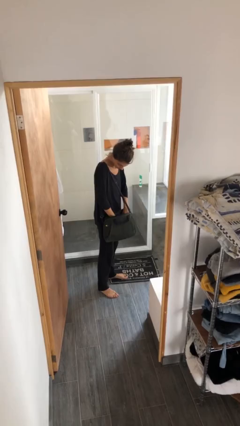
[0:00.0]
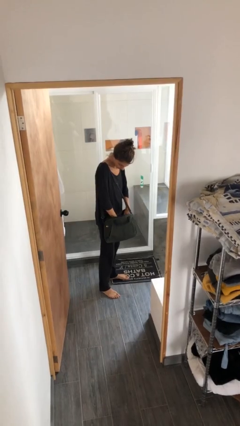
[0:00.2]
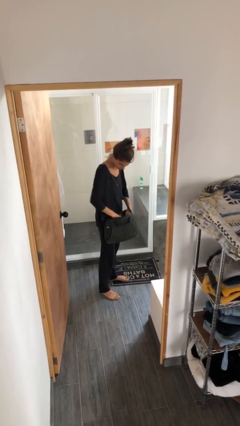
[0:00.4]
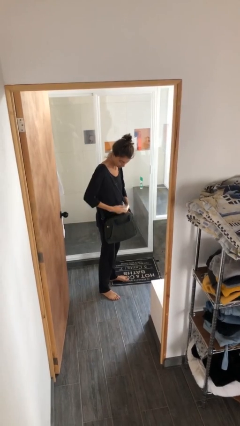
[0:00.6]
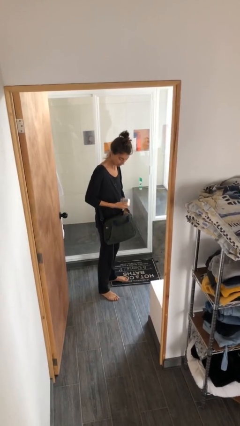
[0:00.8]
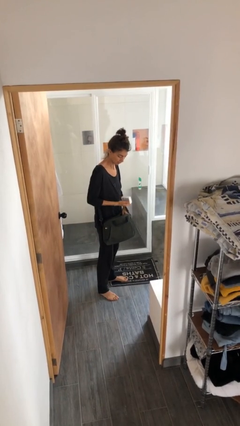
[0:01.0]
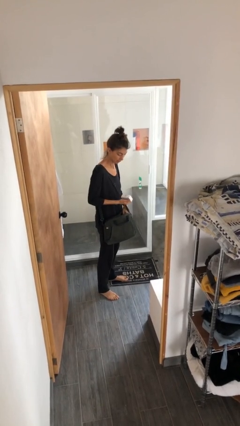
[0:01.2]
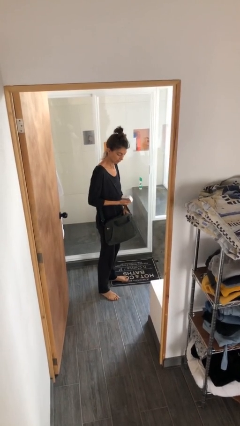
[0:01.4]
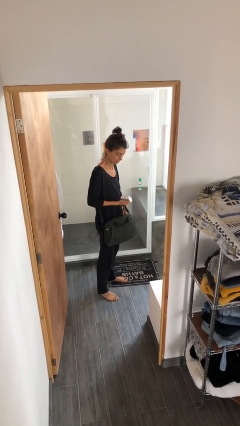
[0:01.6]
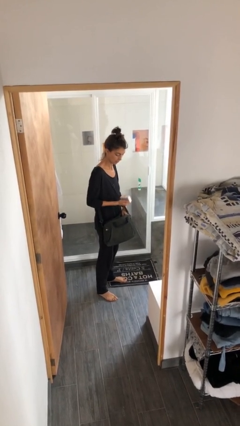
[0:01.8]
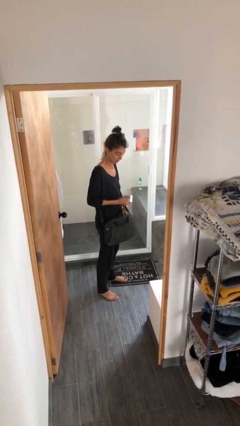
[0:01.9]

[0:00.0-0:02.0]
person takes object from purse

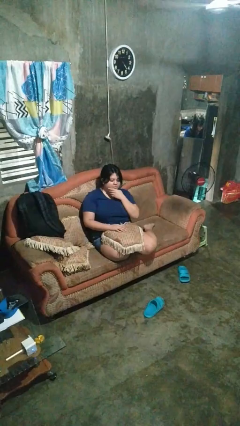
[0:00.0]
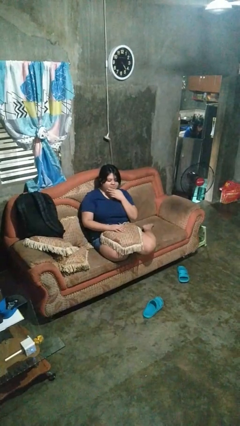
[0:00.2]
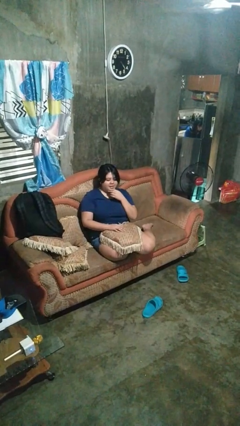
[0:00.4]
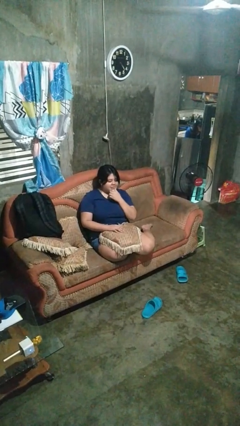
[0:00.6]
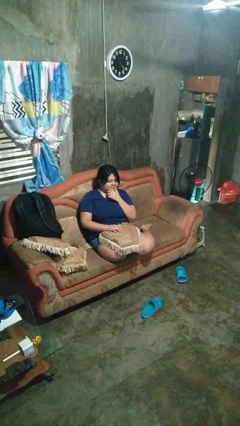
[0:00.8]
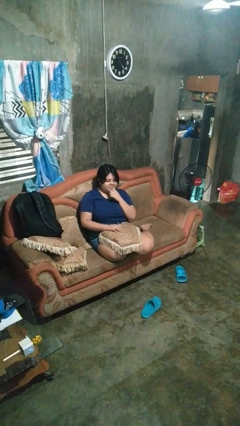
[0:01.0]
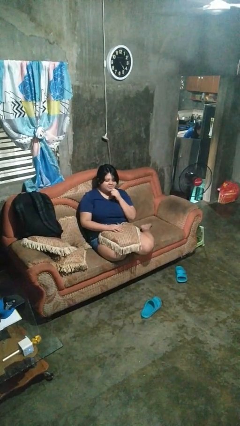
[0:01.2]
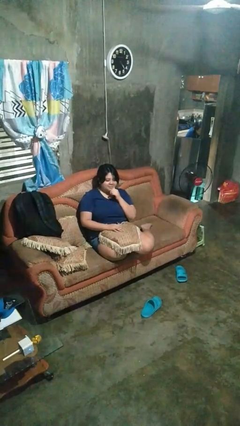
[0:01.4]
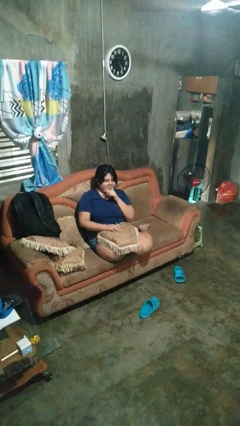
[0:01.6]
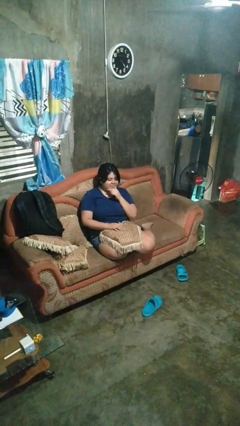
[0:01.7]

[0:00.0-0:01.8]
person strokes chin

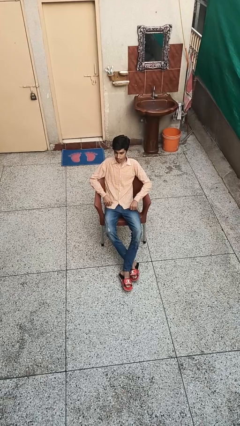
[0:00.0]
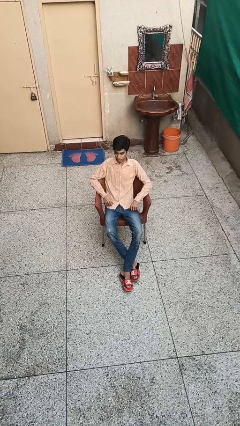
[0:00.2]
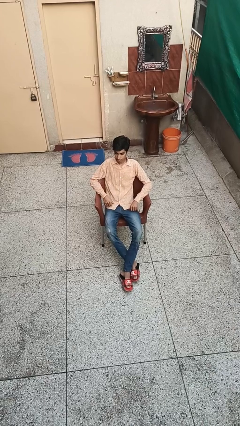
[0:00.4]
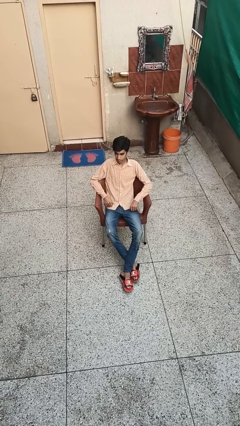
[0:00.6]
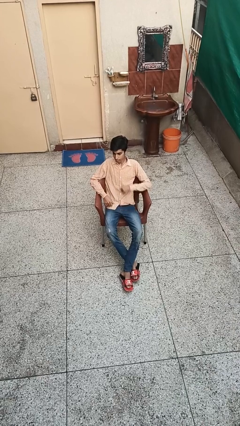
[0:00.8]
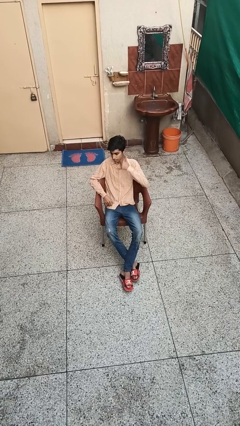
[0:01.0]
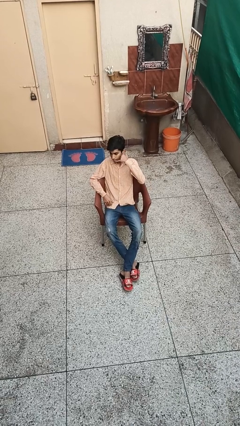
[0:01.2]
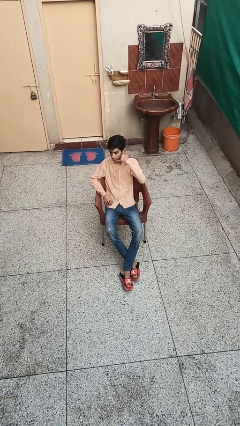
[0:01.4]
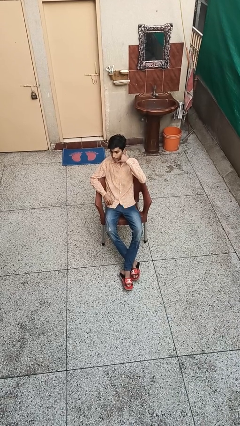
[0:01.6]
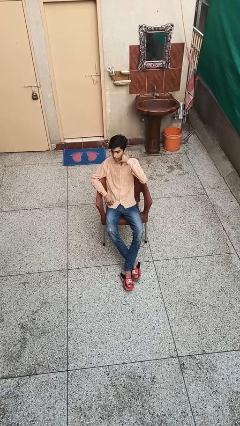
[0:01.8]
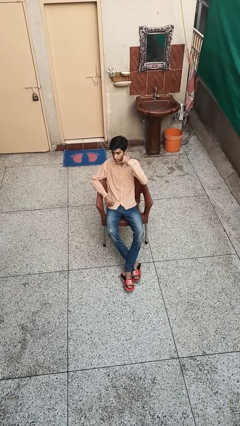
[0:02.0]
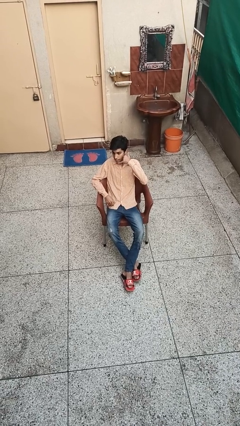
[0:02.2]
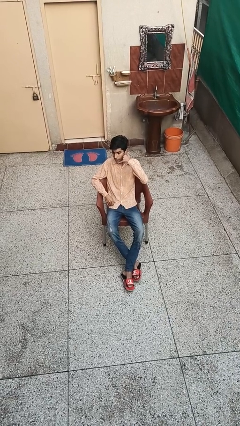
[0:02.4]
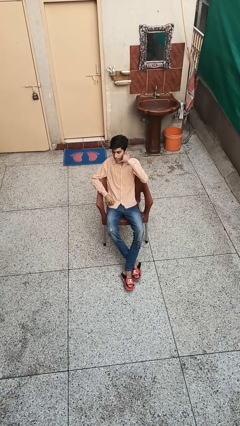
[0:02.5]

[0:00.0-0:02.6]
person gestures call me

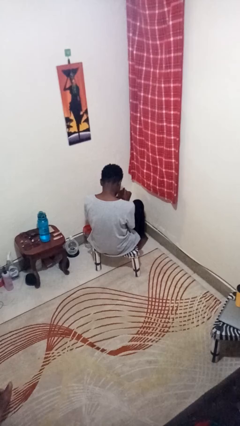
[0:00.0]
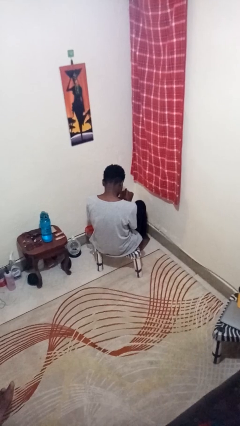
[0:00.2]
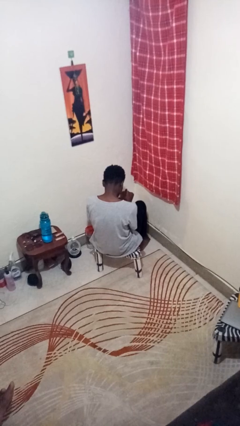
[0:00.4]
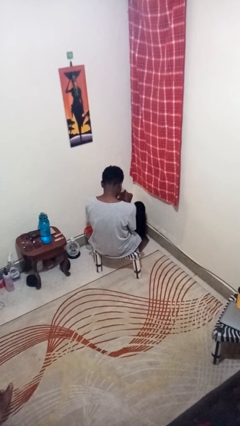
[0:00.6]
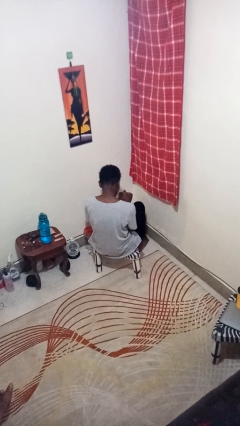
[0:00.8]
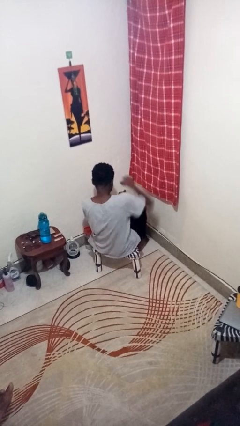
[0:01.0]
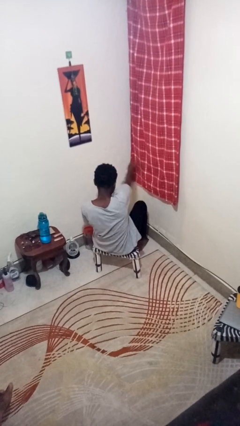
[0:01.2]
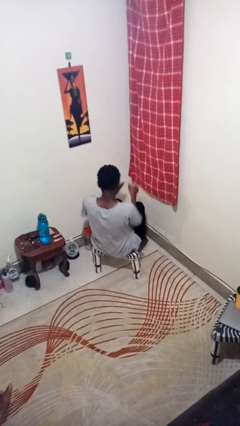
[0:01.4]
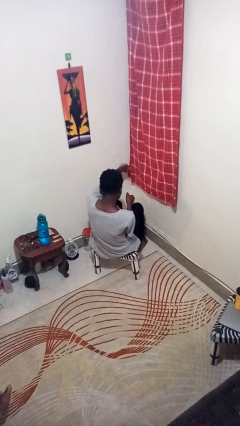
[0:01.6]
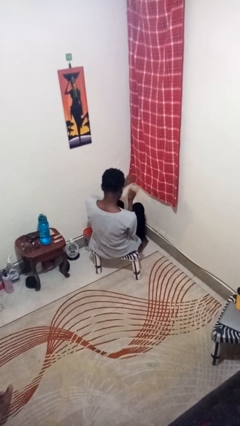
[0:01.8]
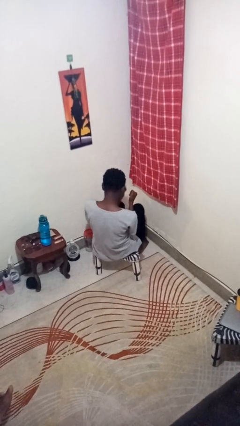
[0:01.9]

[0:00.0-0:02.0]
person punches

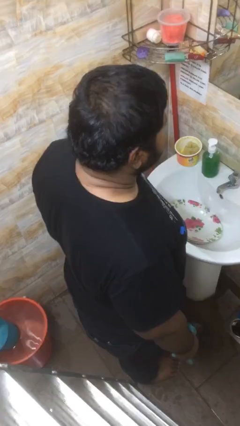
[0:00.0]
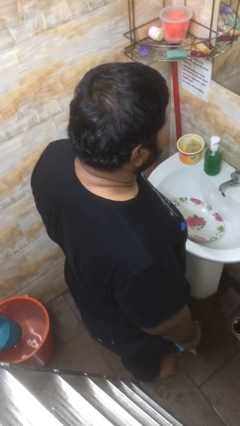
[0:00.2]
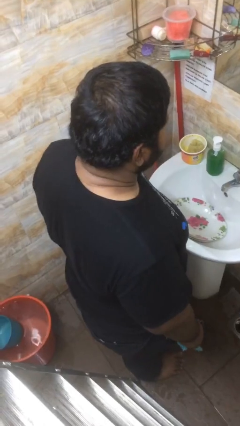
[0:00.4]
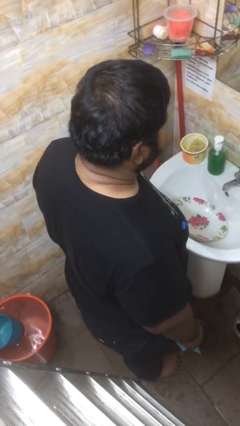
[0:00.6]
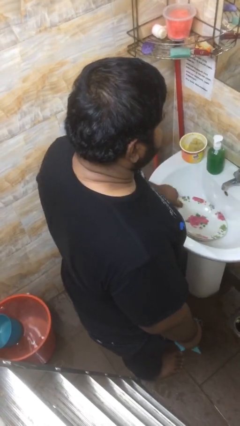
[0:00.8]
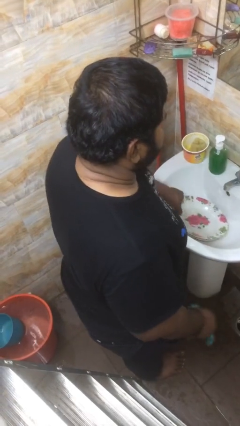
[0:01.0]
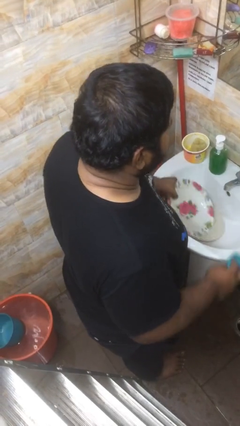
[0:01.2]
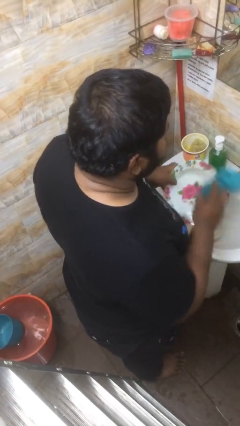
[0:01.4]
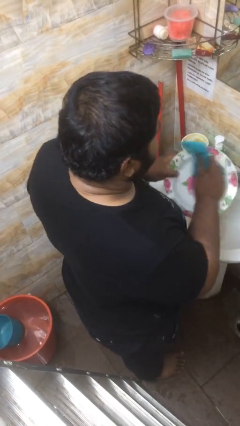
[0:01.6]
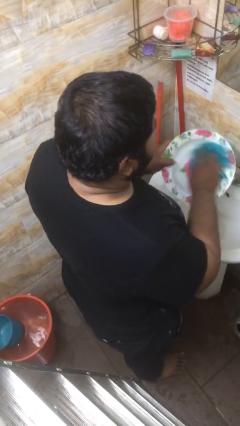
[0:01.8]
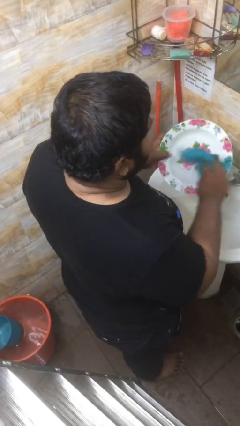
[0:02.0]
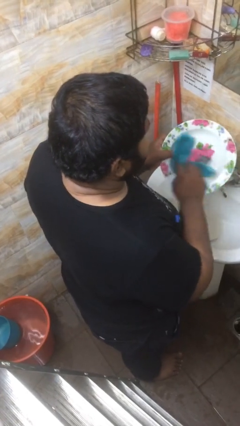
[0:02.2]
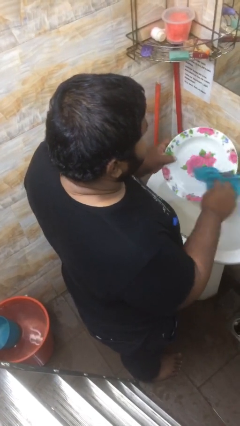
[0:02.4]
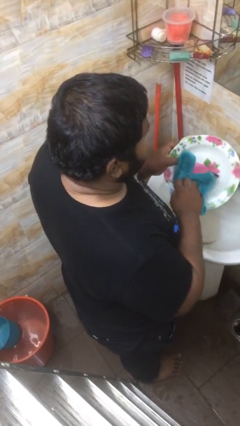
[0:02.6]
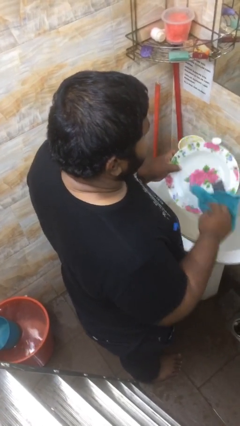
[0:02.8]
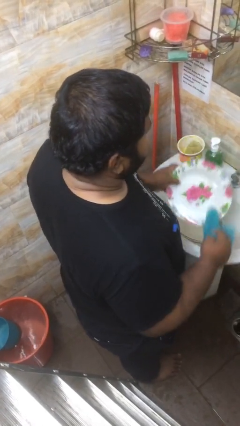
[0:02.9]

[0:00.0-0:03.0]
person dries dish

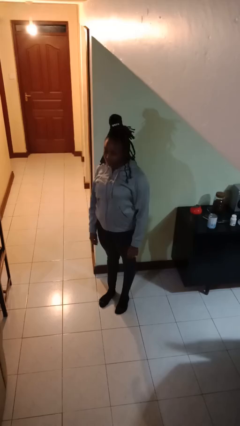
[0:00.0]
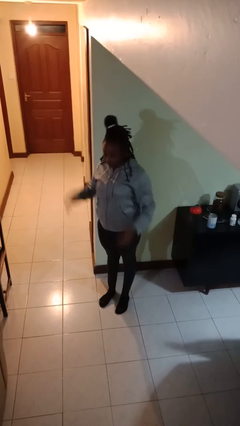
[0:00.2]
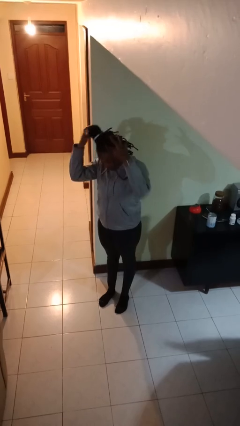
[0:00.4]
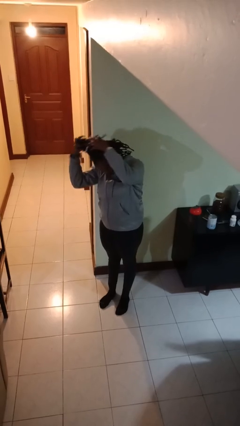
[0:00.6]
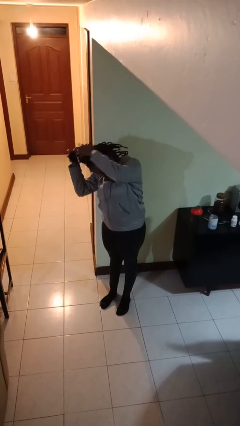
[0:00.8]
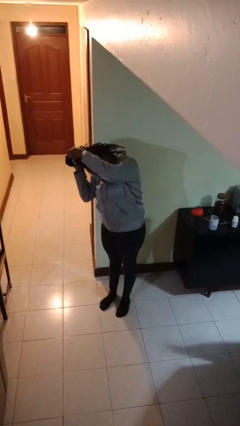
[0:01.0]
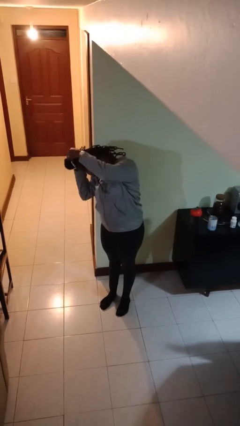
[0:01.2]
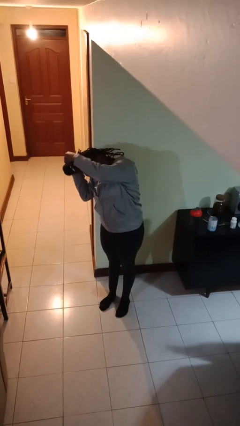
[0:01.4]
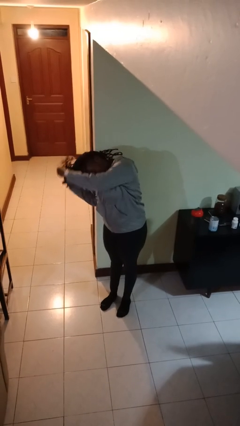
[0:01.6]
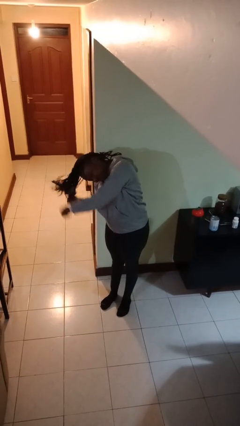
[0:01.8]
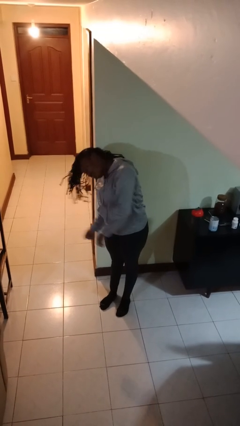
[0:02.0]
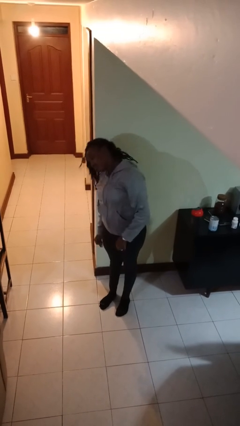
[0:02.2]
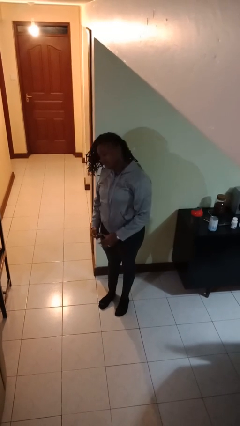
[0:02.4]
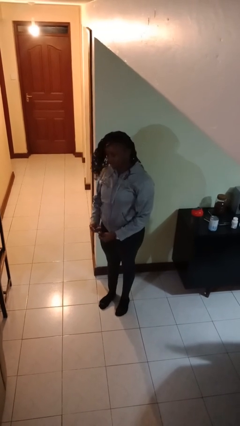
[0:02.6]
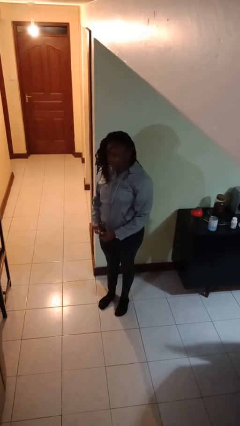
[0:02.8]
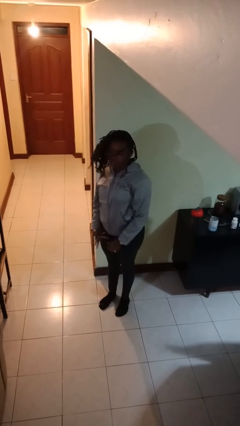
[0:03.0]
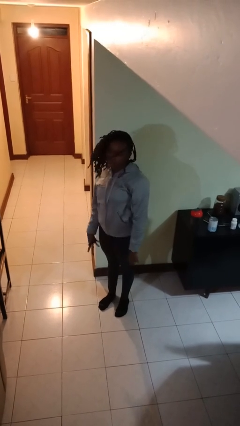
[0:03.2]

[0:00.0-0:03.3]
person takes off hairtie

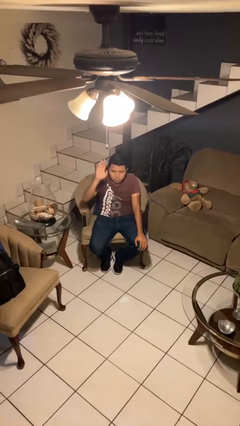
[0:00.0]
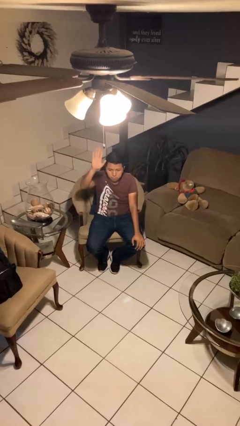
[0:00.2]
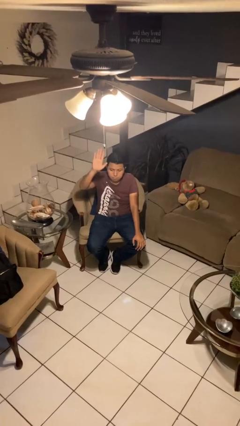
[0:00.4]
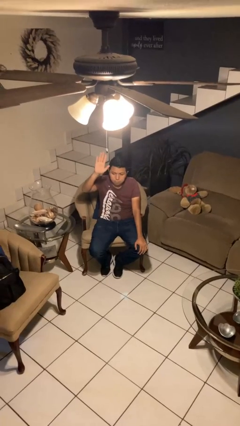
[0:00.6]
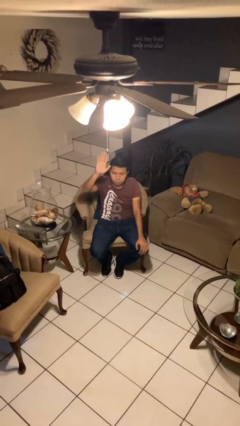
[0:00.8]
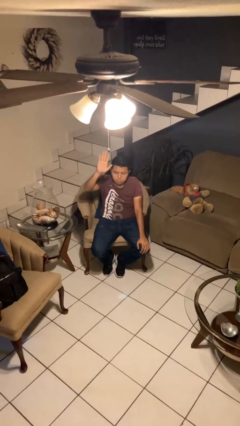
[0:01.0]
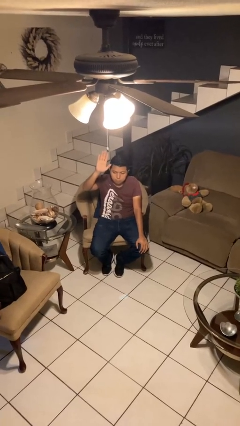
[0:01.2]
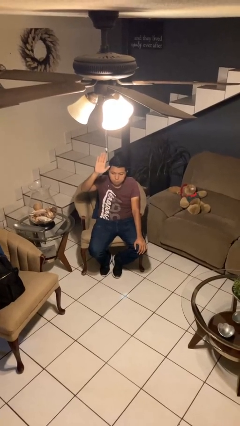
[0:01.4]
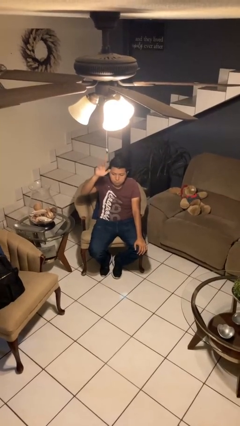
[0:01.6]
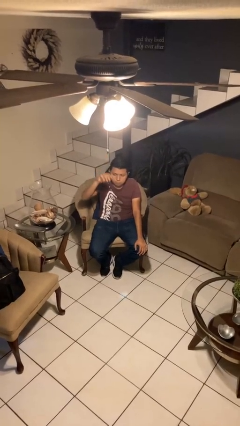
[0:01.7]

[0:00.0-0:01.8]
person gestures raise hand

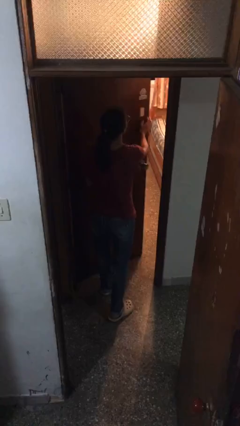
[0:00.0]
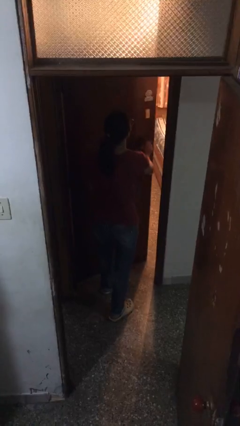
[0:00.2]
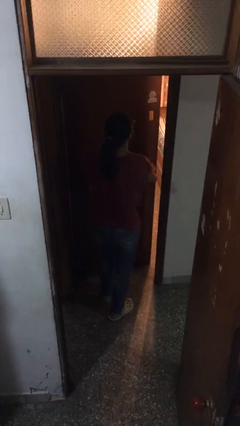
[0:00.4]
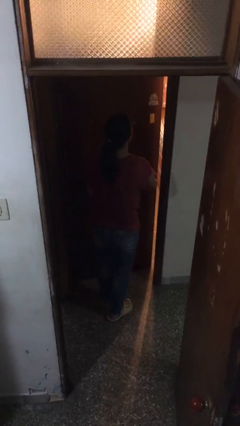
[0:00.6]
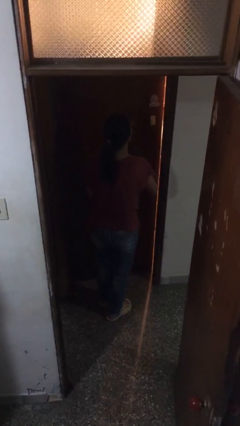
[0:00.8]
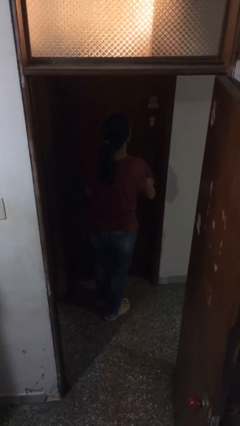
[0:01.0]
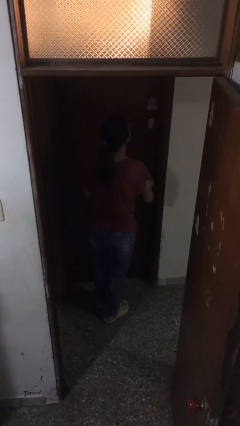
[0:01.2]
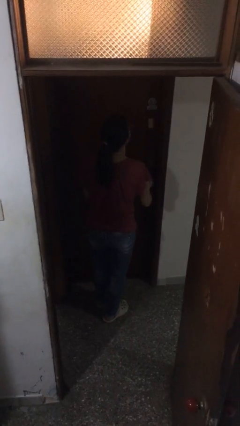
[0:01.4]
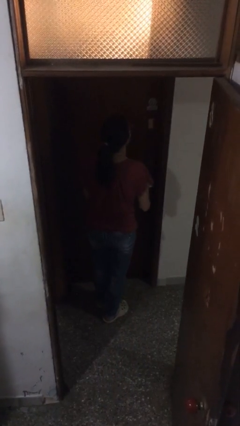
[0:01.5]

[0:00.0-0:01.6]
person closes facility door